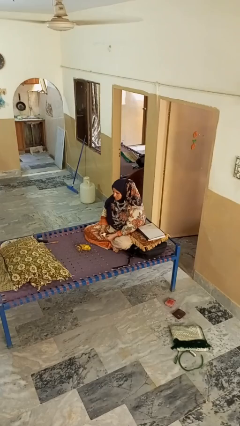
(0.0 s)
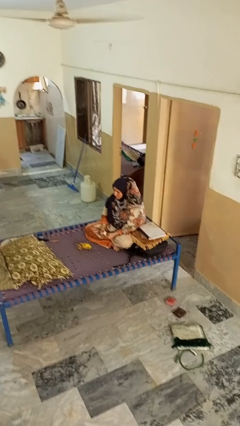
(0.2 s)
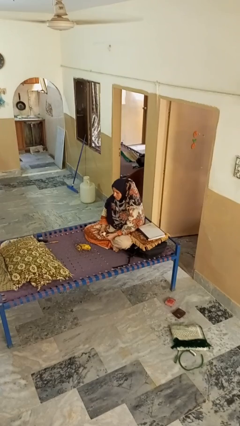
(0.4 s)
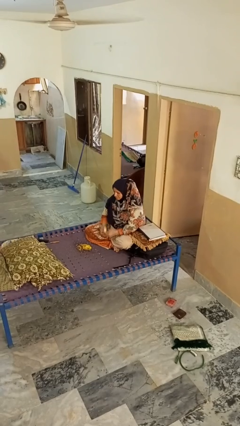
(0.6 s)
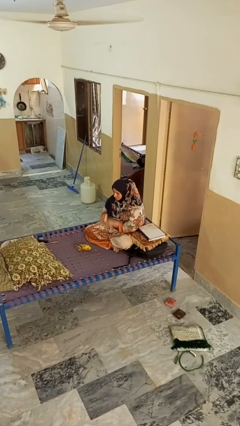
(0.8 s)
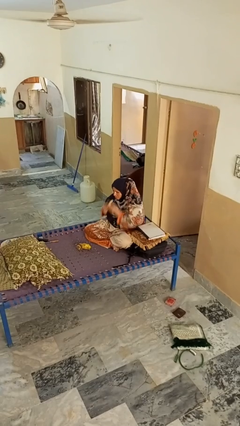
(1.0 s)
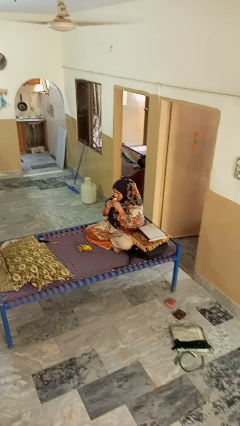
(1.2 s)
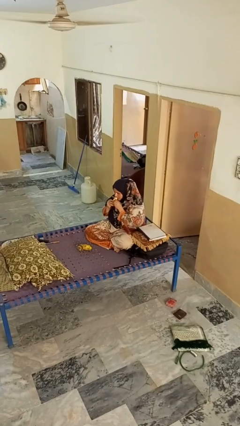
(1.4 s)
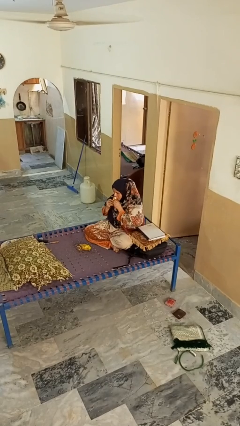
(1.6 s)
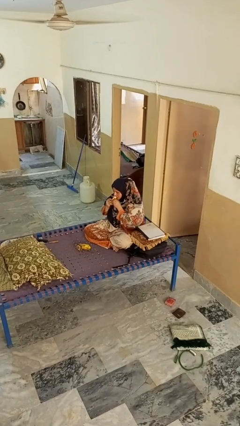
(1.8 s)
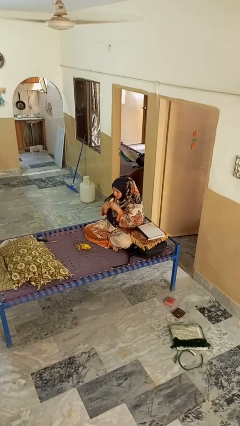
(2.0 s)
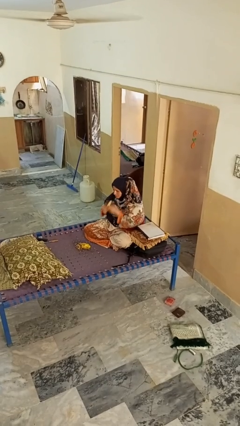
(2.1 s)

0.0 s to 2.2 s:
person eats banana

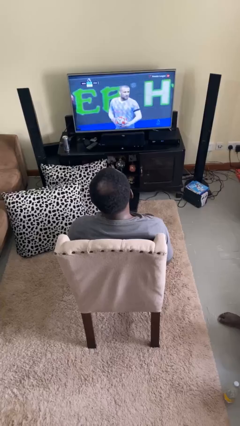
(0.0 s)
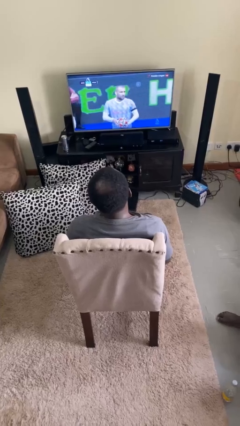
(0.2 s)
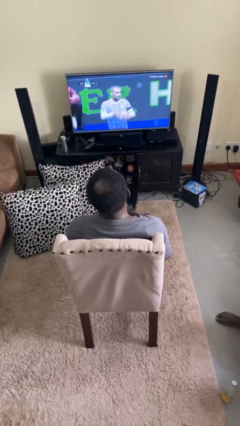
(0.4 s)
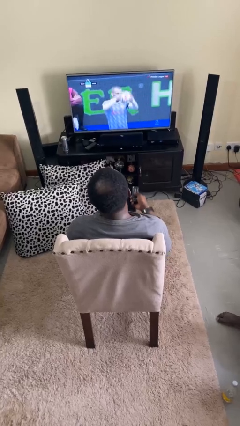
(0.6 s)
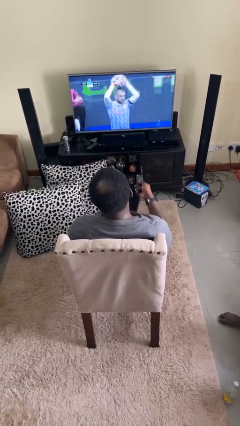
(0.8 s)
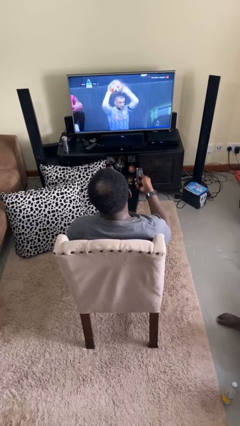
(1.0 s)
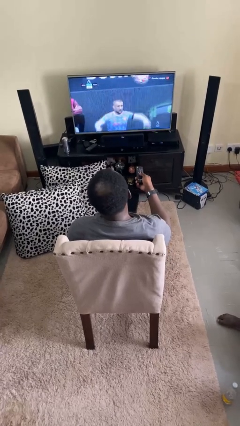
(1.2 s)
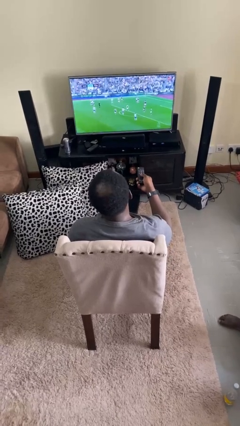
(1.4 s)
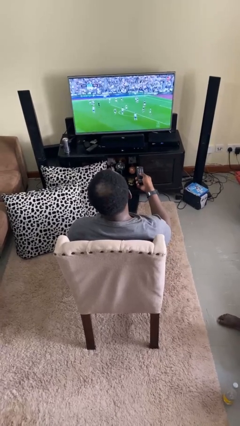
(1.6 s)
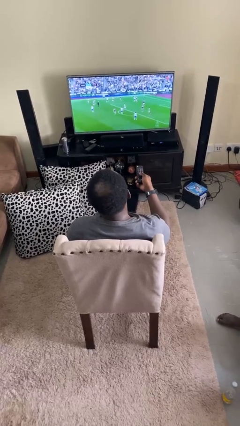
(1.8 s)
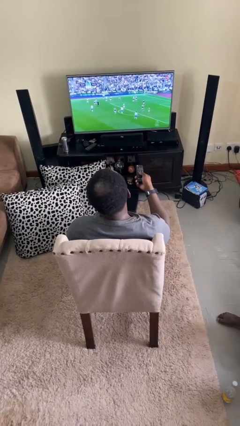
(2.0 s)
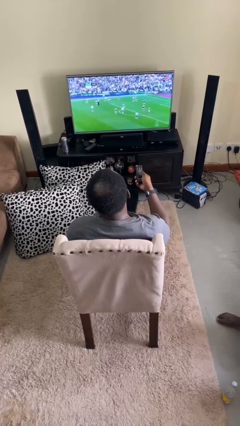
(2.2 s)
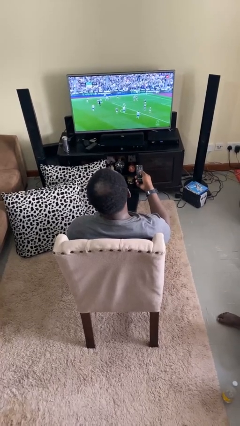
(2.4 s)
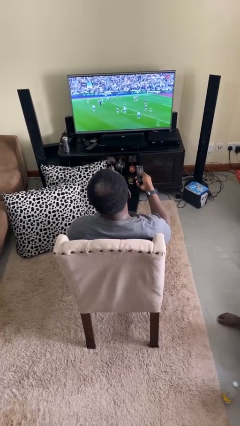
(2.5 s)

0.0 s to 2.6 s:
person uses television remote

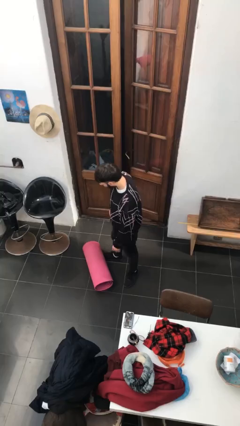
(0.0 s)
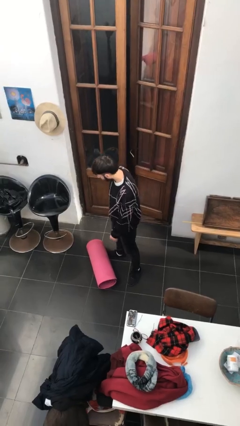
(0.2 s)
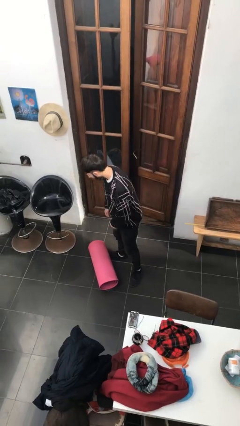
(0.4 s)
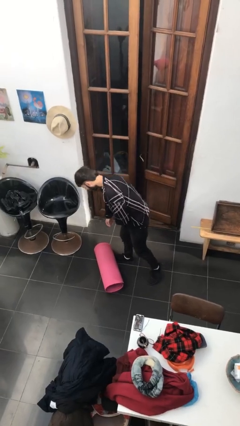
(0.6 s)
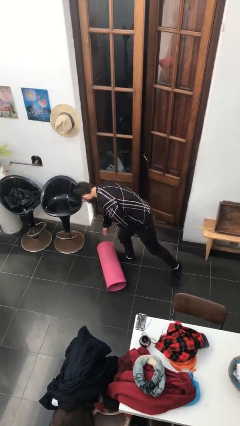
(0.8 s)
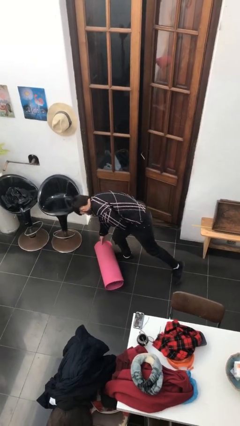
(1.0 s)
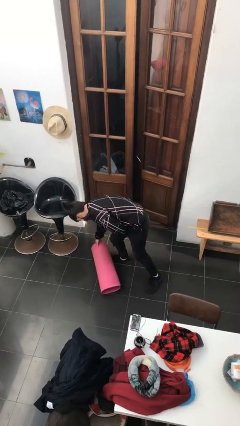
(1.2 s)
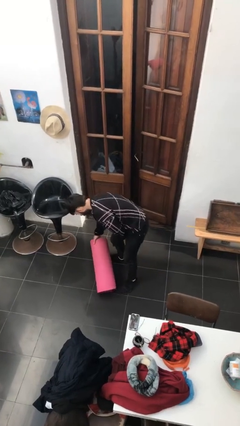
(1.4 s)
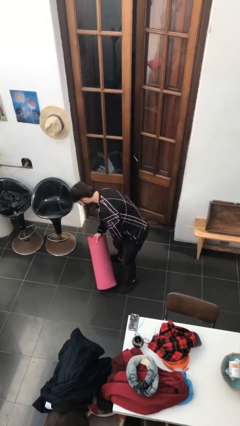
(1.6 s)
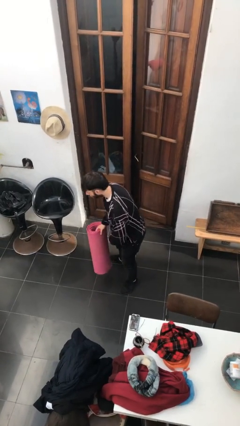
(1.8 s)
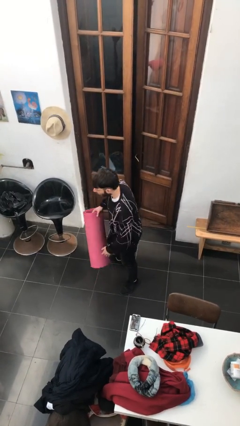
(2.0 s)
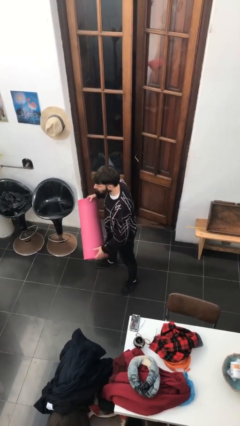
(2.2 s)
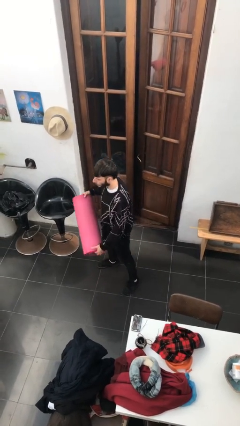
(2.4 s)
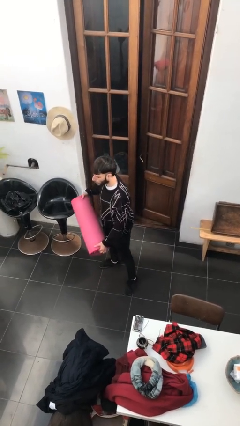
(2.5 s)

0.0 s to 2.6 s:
person picks up object from floor

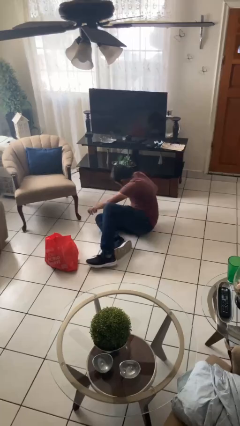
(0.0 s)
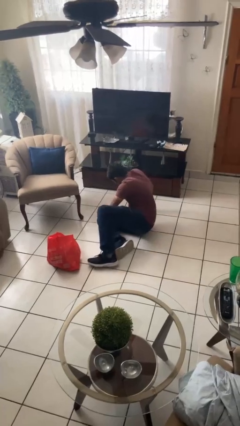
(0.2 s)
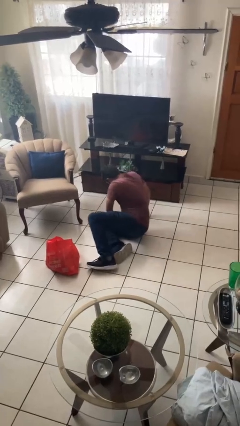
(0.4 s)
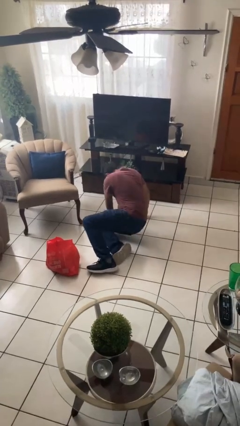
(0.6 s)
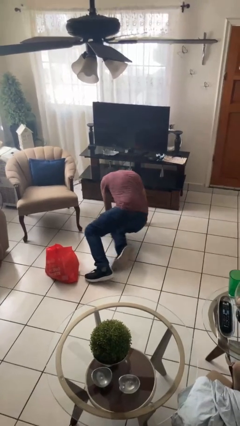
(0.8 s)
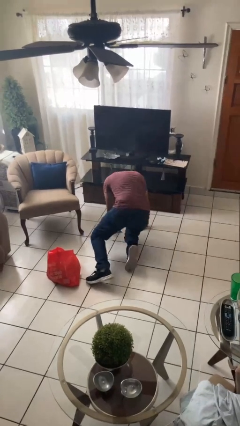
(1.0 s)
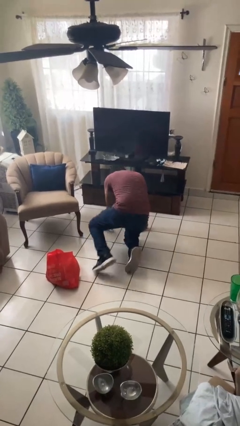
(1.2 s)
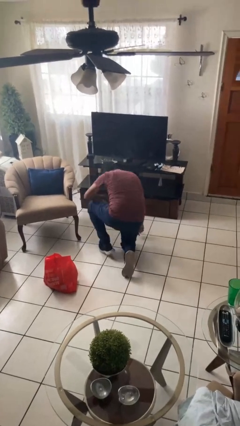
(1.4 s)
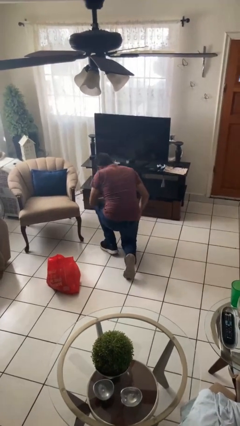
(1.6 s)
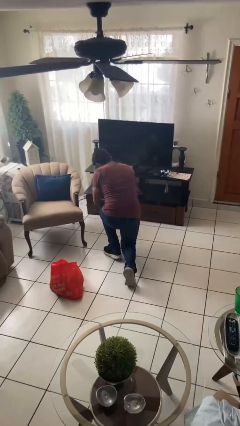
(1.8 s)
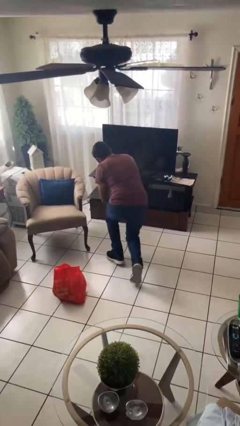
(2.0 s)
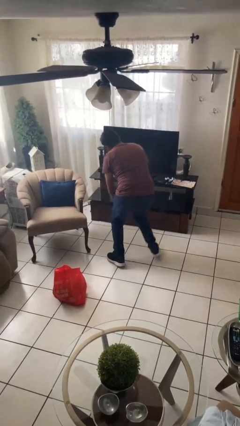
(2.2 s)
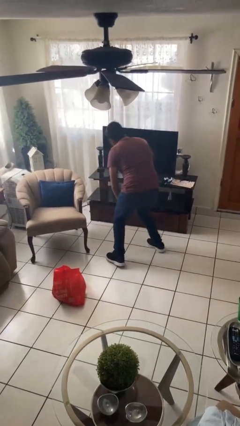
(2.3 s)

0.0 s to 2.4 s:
person stands up from floor

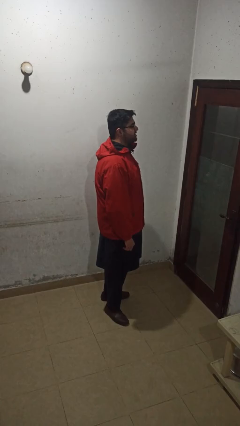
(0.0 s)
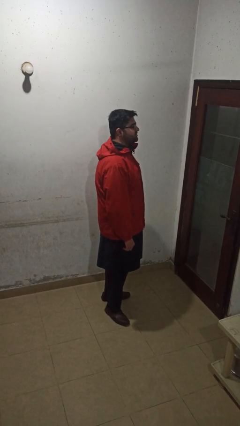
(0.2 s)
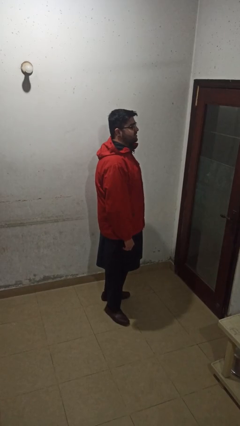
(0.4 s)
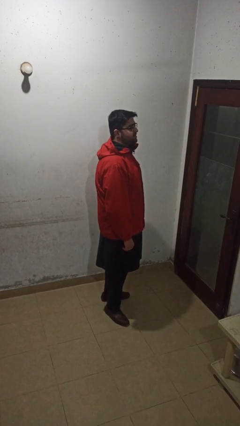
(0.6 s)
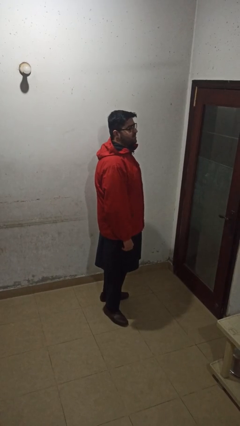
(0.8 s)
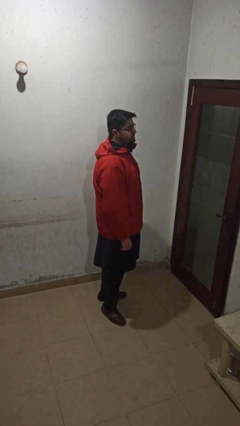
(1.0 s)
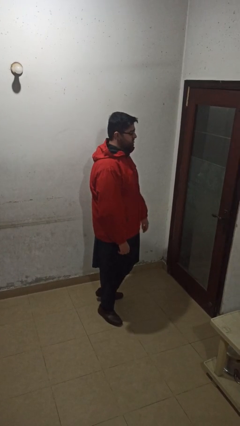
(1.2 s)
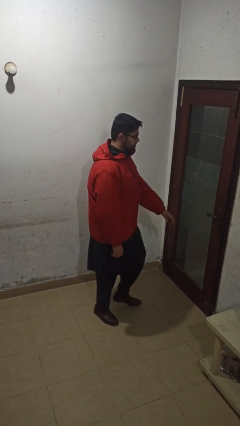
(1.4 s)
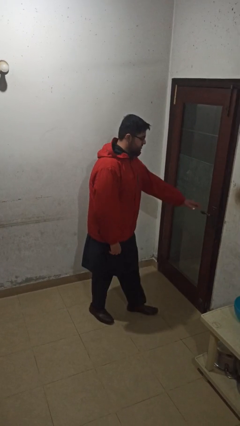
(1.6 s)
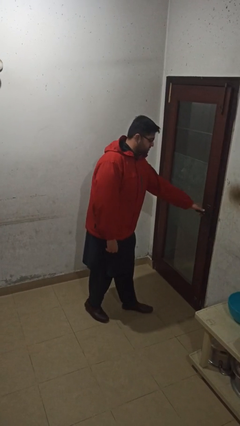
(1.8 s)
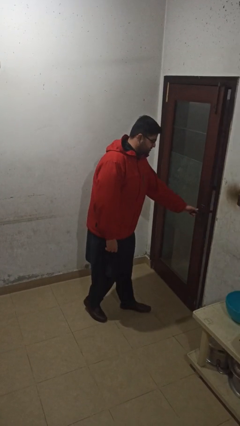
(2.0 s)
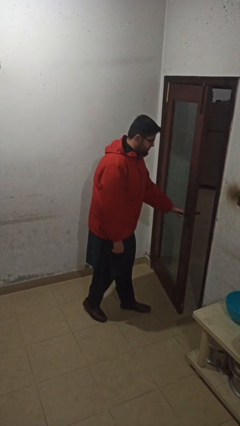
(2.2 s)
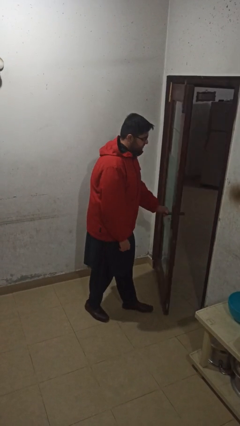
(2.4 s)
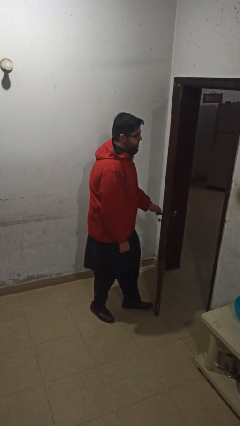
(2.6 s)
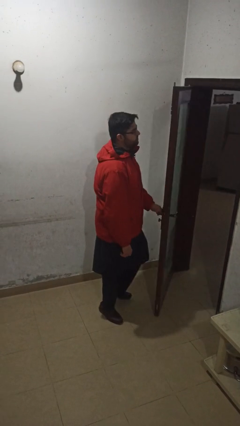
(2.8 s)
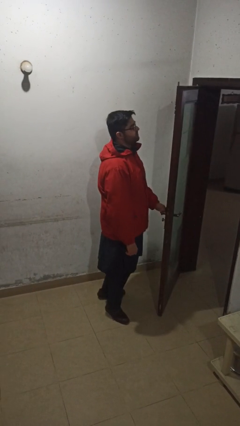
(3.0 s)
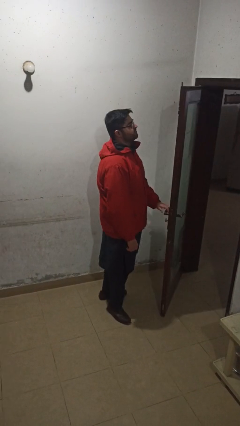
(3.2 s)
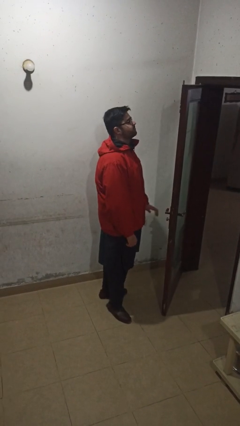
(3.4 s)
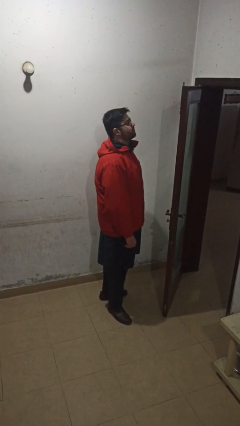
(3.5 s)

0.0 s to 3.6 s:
person opens facility door

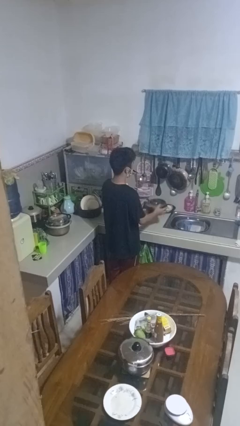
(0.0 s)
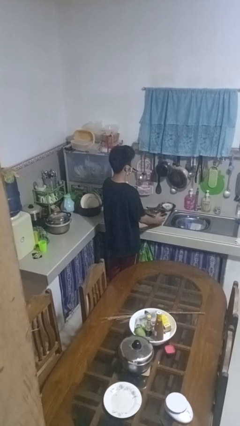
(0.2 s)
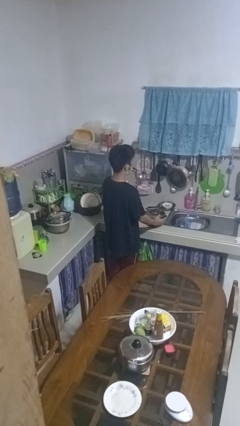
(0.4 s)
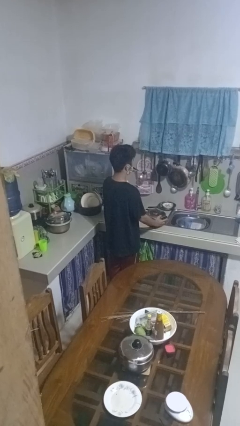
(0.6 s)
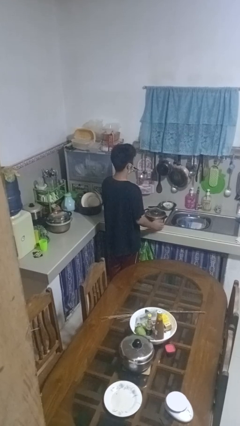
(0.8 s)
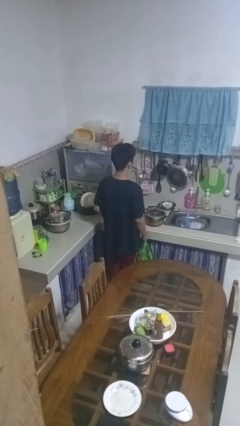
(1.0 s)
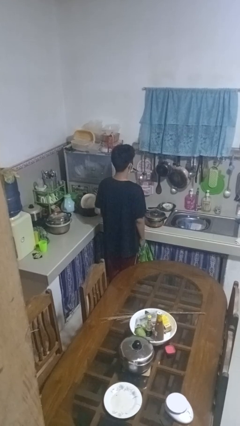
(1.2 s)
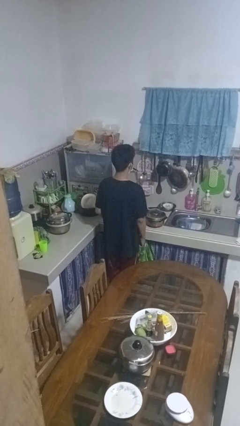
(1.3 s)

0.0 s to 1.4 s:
person puts down object on countertop

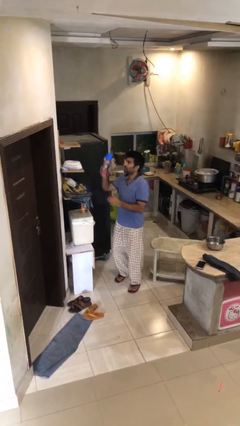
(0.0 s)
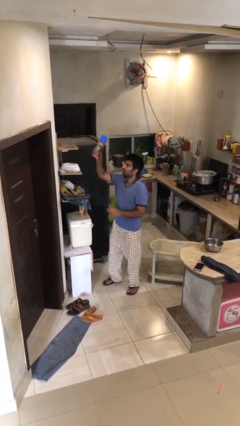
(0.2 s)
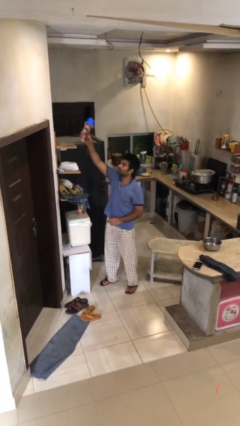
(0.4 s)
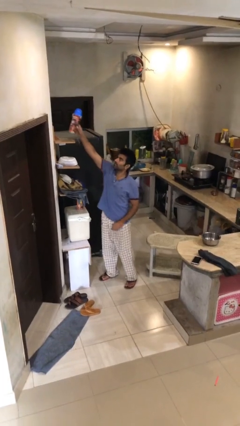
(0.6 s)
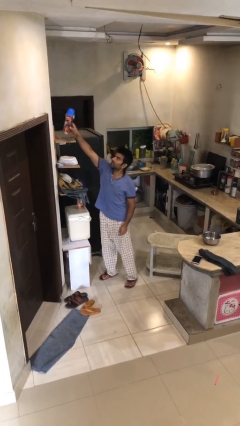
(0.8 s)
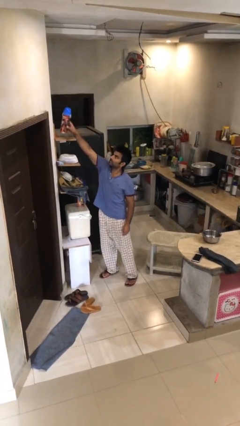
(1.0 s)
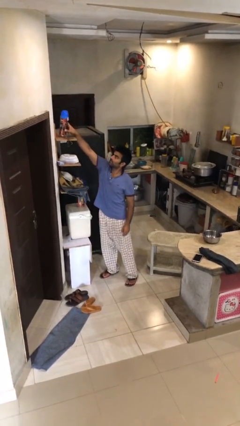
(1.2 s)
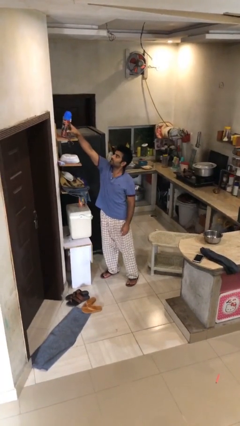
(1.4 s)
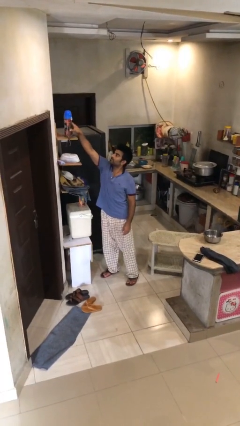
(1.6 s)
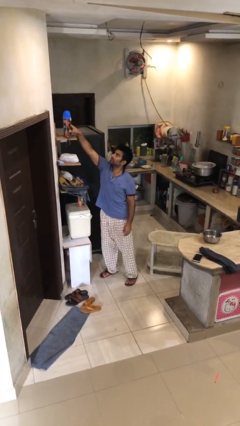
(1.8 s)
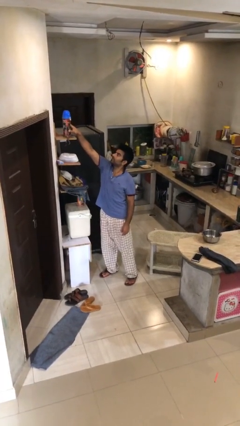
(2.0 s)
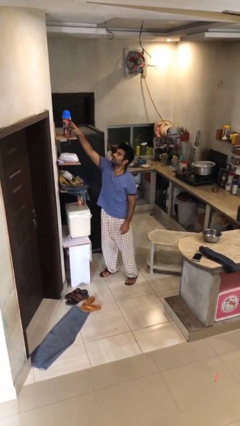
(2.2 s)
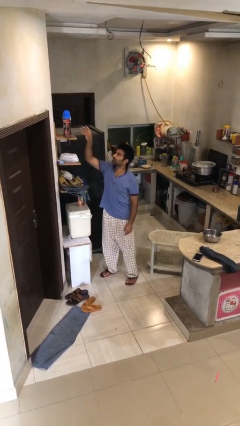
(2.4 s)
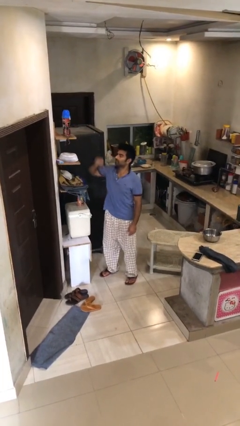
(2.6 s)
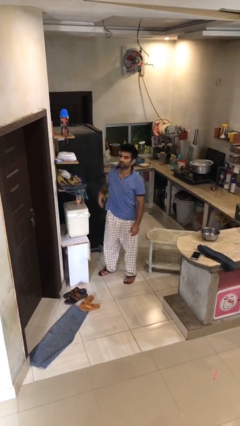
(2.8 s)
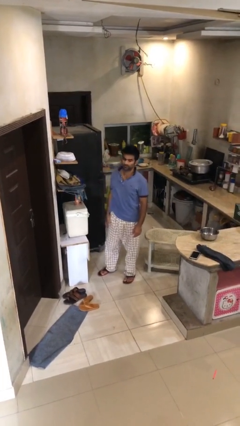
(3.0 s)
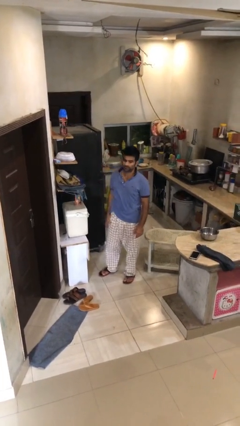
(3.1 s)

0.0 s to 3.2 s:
person puts down object on shelf
